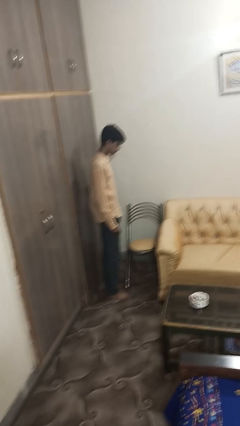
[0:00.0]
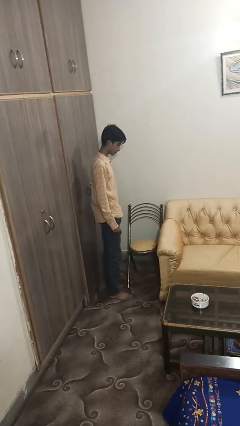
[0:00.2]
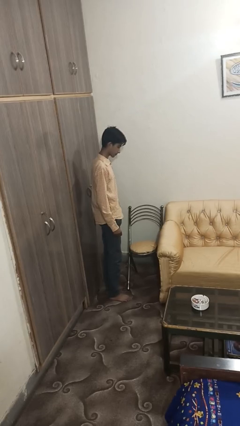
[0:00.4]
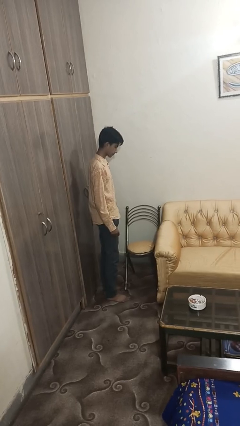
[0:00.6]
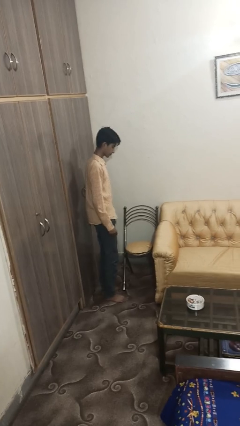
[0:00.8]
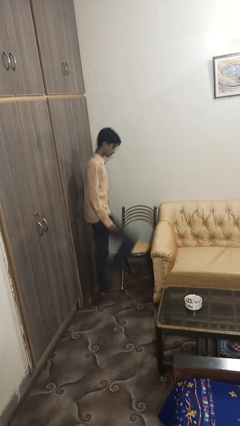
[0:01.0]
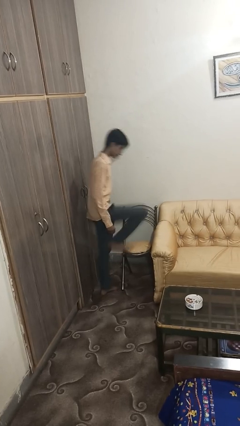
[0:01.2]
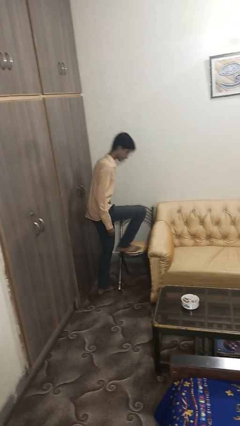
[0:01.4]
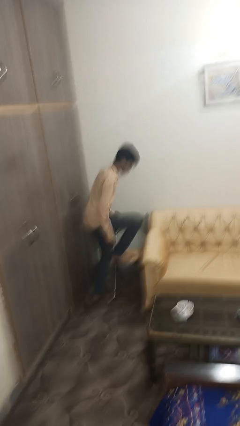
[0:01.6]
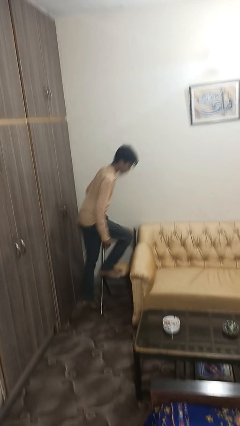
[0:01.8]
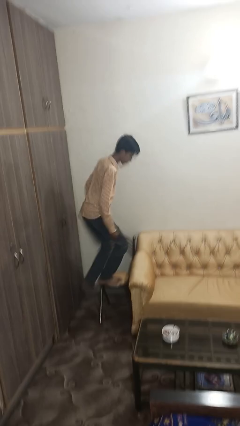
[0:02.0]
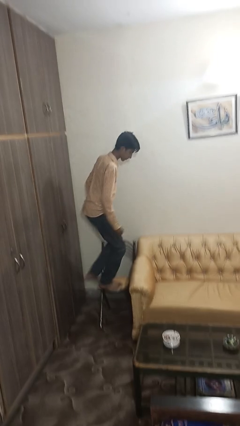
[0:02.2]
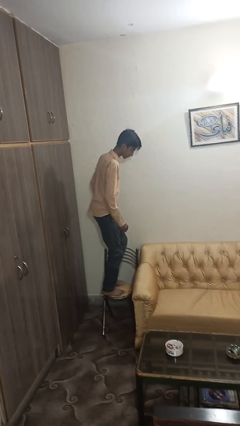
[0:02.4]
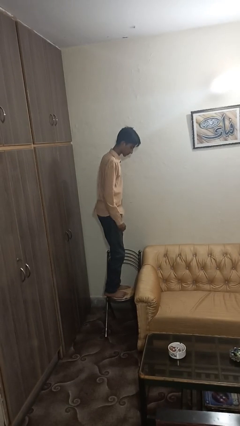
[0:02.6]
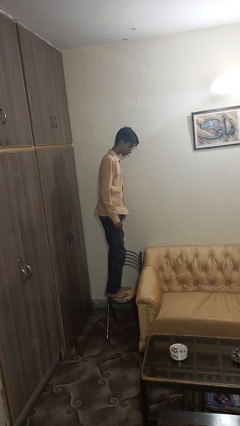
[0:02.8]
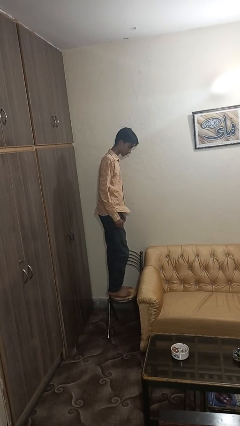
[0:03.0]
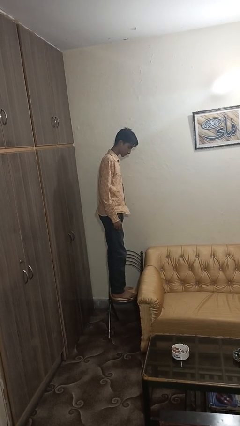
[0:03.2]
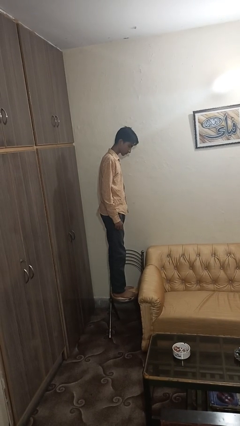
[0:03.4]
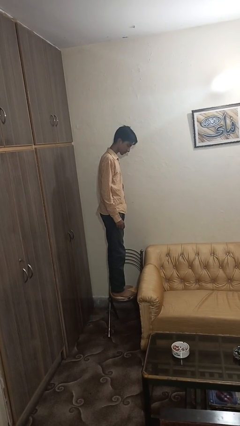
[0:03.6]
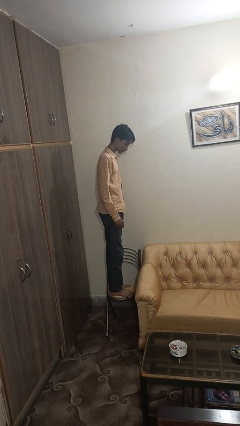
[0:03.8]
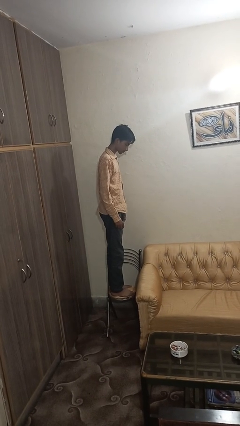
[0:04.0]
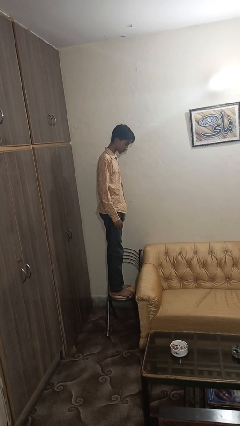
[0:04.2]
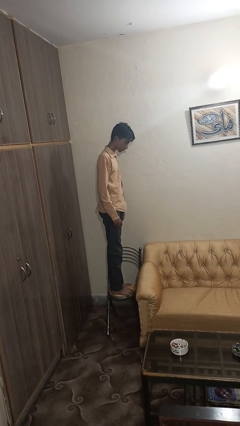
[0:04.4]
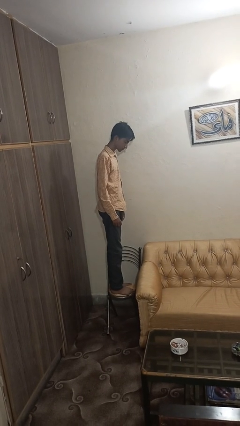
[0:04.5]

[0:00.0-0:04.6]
person climbs on chair

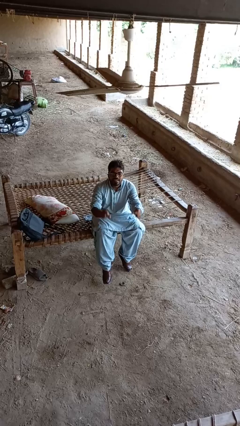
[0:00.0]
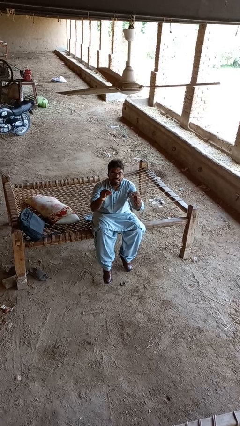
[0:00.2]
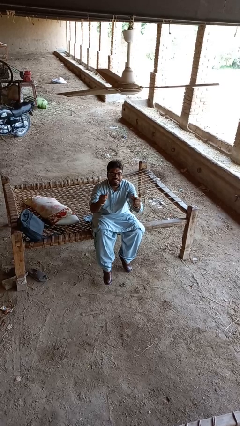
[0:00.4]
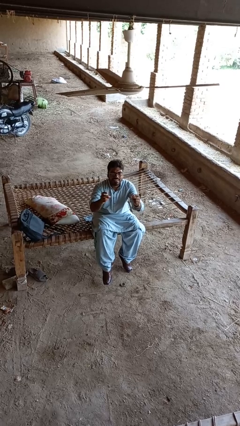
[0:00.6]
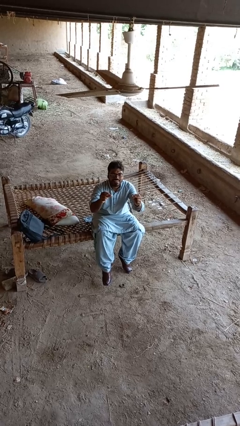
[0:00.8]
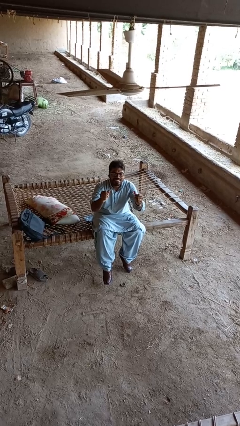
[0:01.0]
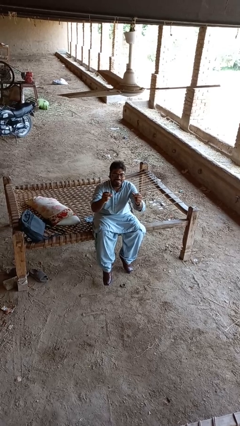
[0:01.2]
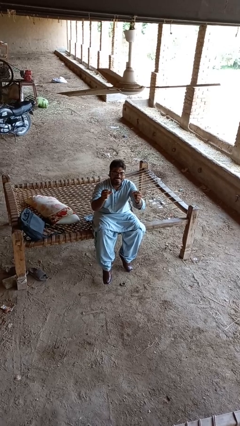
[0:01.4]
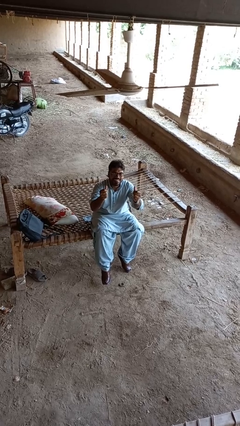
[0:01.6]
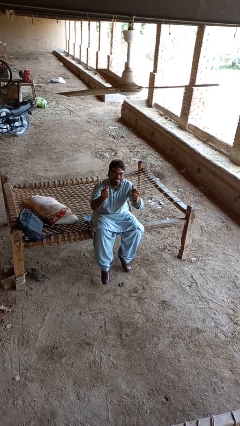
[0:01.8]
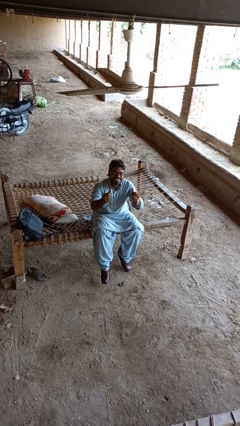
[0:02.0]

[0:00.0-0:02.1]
person snaps fingers

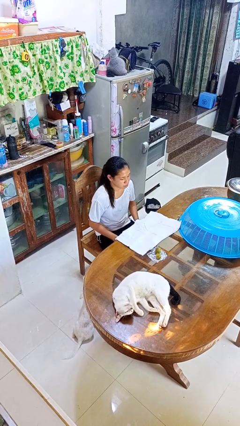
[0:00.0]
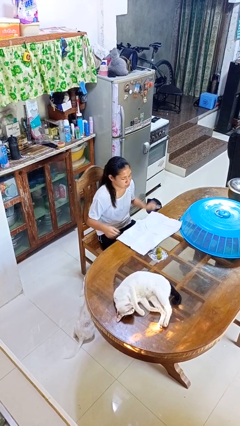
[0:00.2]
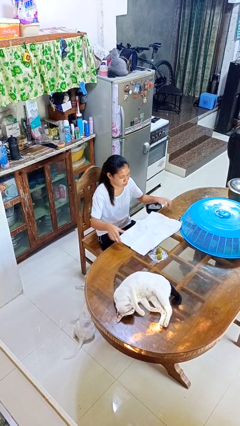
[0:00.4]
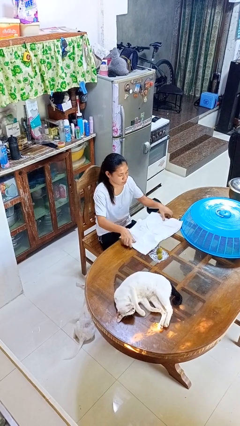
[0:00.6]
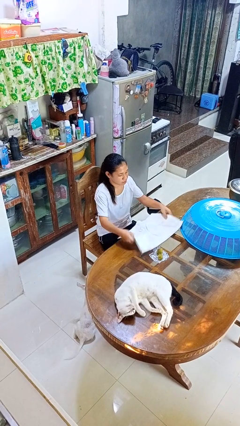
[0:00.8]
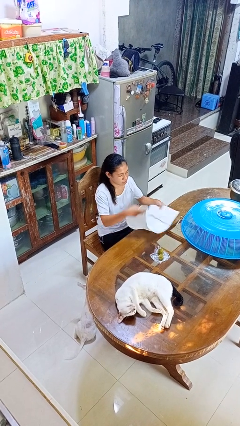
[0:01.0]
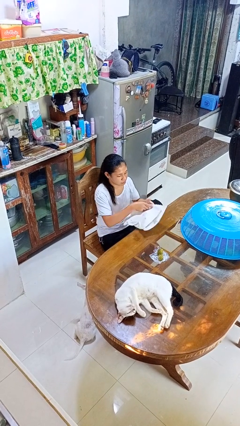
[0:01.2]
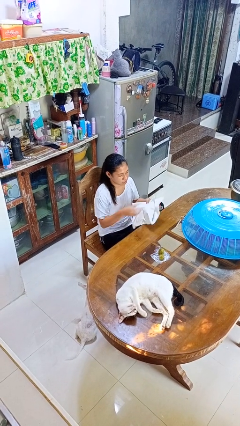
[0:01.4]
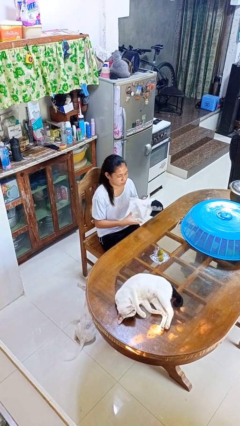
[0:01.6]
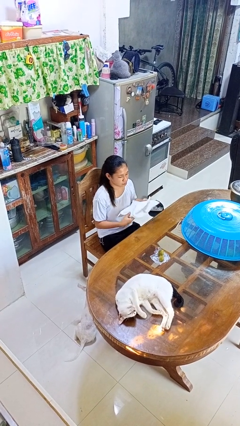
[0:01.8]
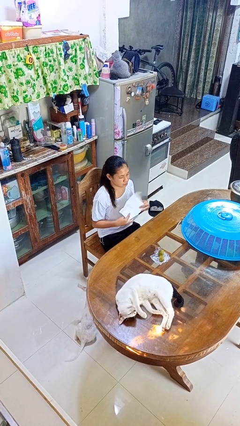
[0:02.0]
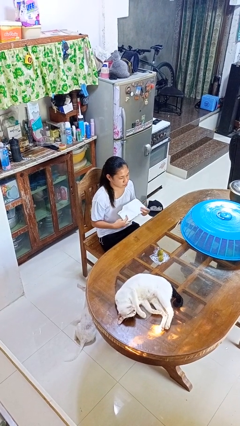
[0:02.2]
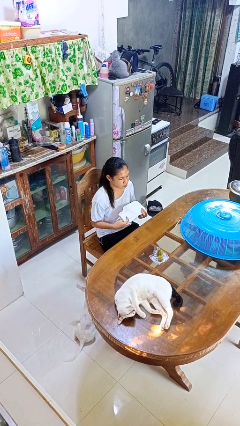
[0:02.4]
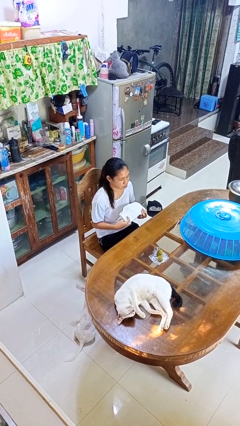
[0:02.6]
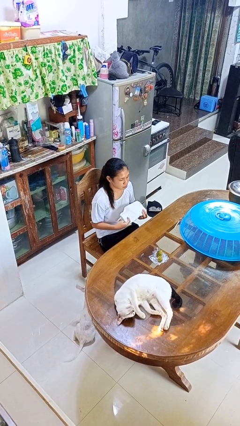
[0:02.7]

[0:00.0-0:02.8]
person folds tablecloth

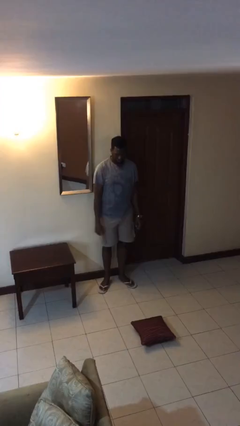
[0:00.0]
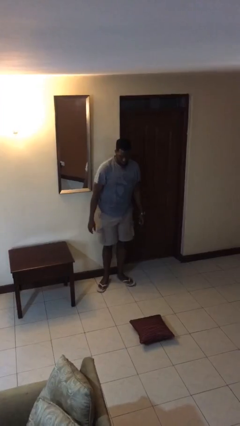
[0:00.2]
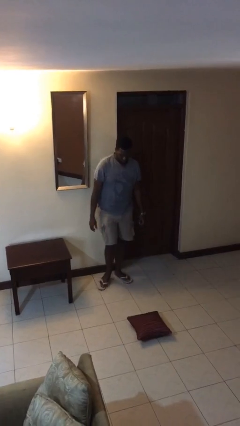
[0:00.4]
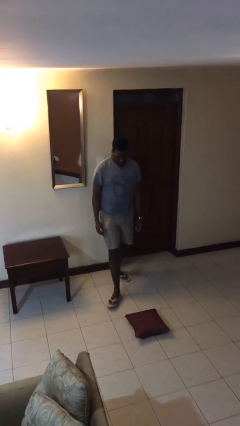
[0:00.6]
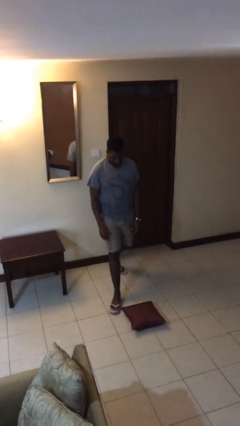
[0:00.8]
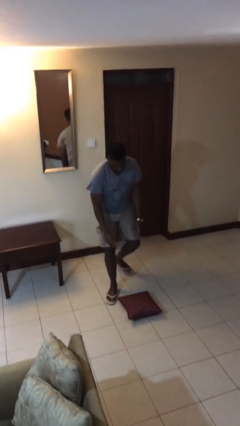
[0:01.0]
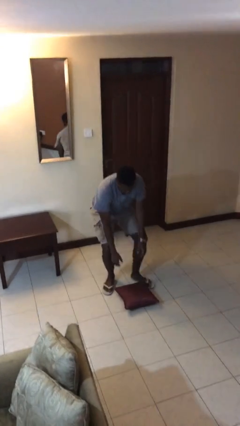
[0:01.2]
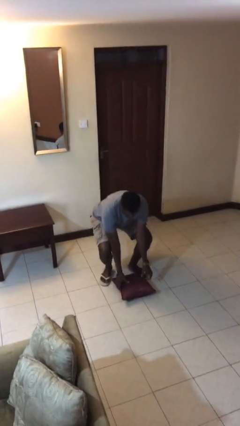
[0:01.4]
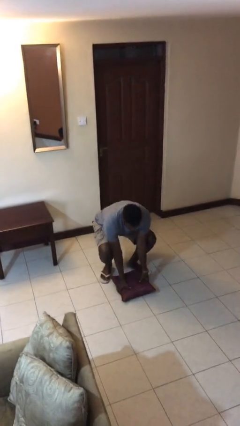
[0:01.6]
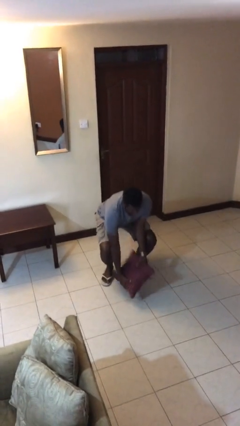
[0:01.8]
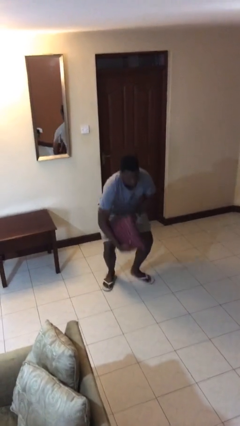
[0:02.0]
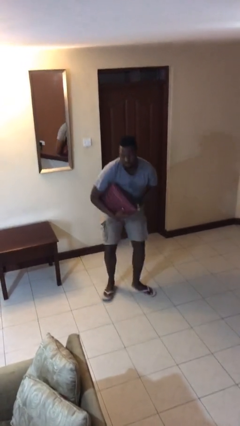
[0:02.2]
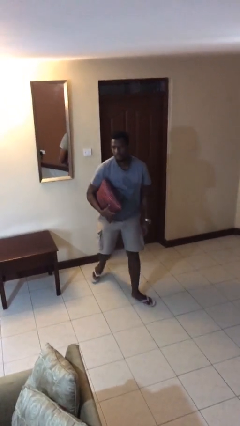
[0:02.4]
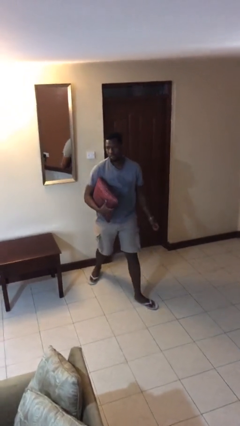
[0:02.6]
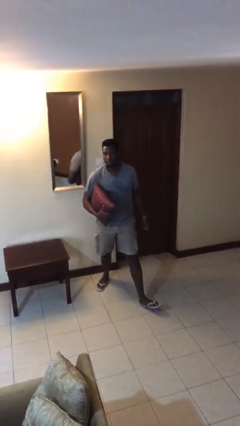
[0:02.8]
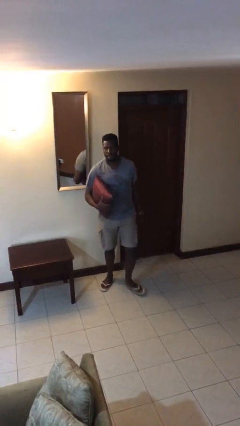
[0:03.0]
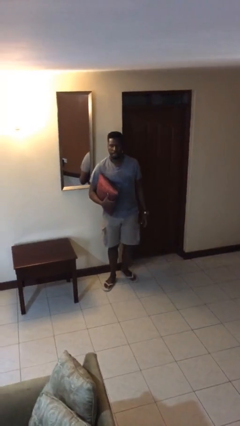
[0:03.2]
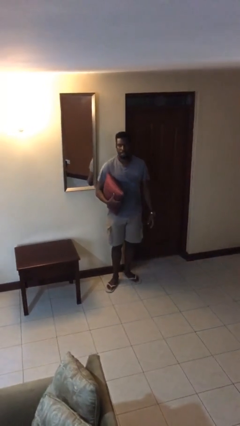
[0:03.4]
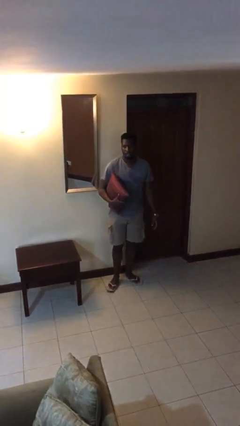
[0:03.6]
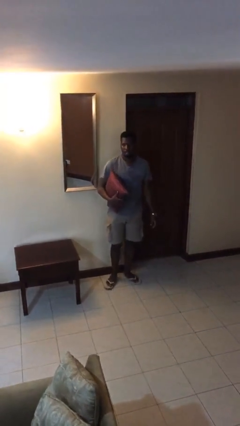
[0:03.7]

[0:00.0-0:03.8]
person picks up object from floor

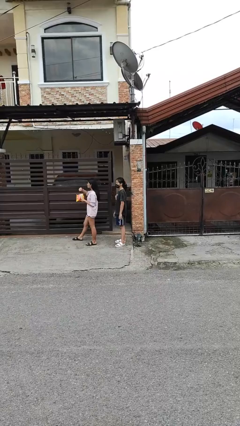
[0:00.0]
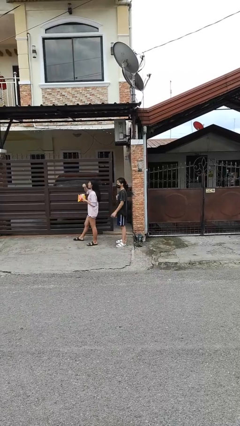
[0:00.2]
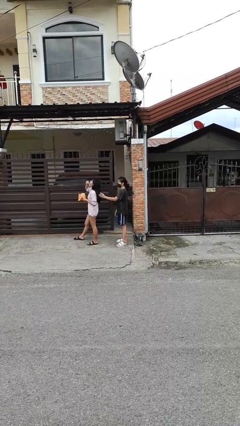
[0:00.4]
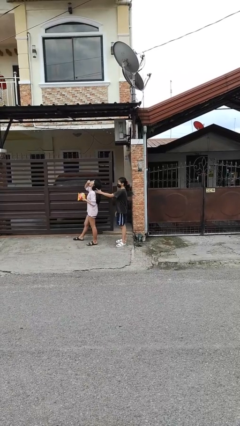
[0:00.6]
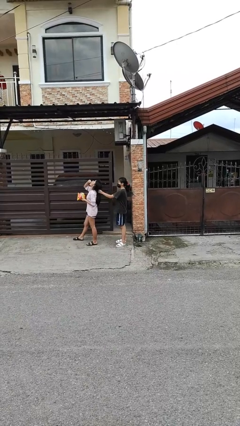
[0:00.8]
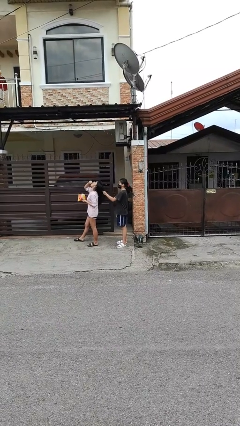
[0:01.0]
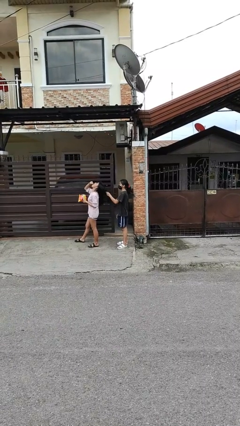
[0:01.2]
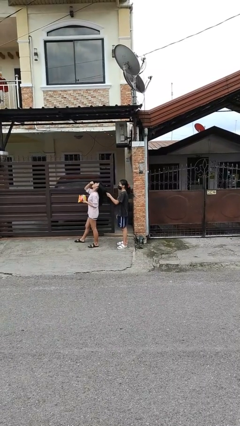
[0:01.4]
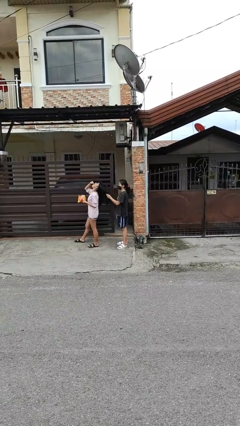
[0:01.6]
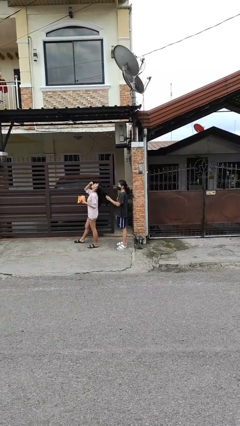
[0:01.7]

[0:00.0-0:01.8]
person grabs person by hair

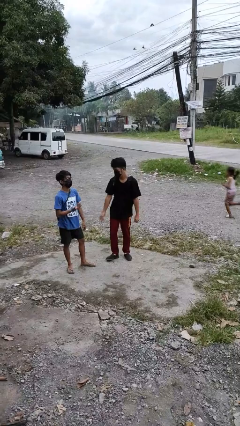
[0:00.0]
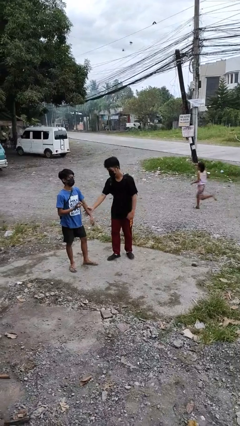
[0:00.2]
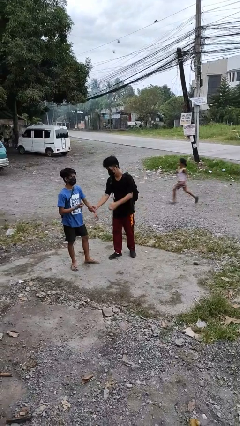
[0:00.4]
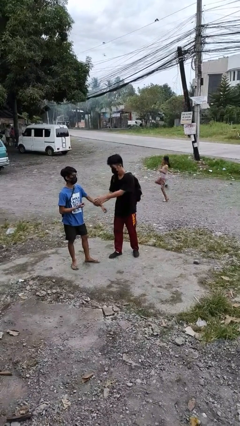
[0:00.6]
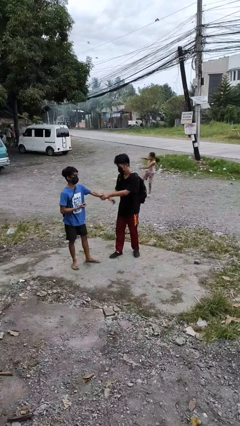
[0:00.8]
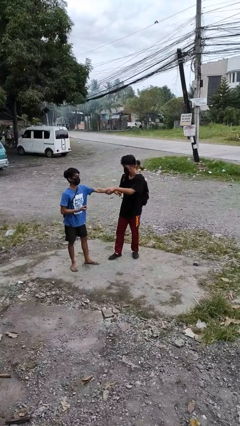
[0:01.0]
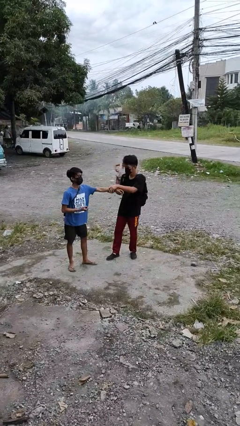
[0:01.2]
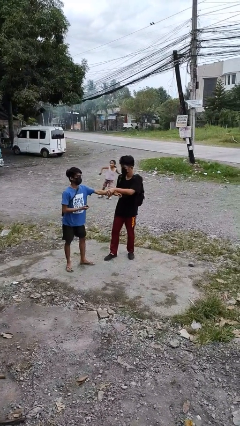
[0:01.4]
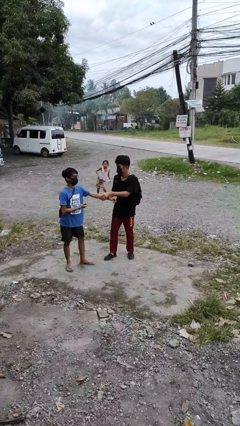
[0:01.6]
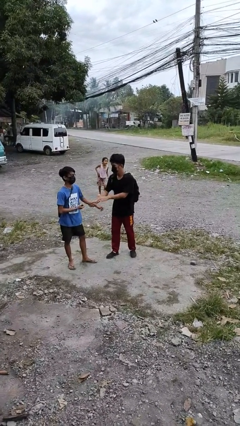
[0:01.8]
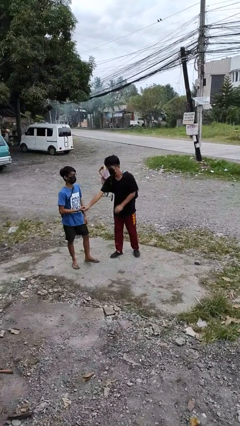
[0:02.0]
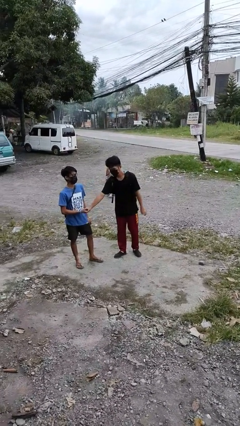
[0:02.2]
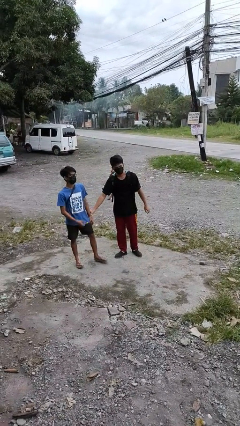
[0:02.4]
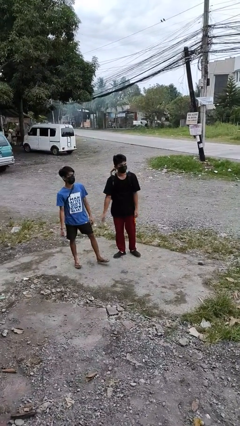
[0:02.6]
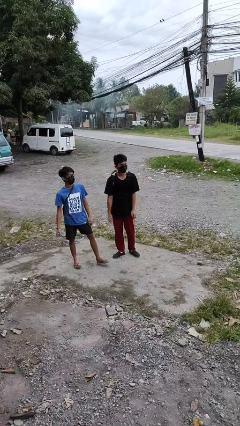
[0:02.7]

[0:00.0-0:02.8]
person grabs person by forearm
